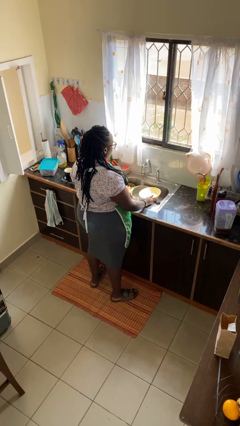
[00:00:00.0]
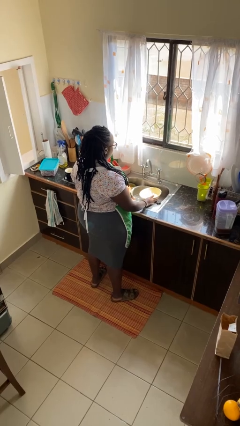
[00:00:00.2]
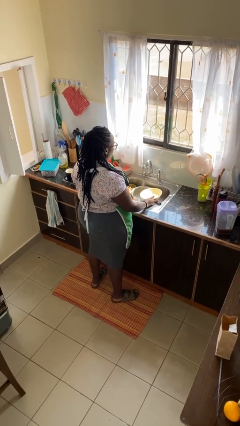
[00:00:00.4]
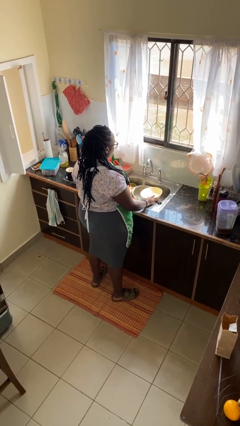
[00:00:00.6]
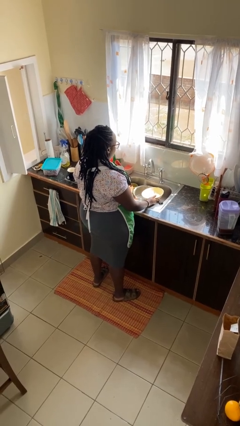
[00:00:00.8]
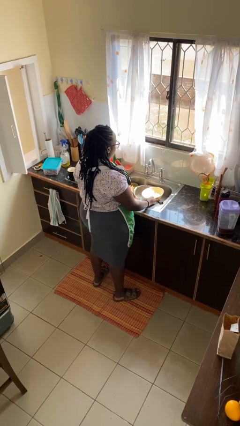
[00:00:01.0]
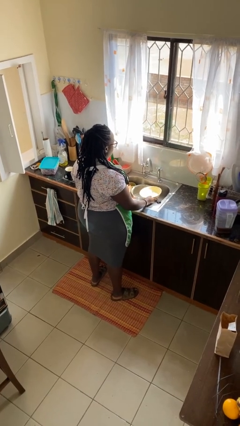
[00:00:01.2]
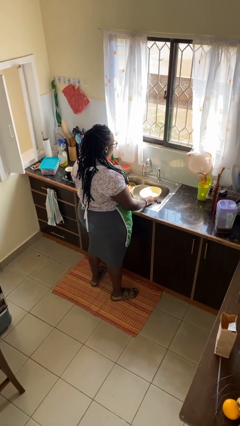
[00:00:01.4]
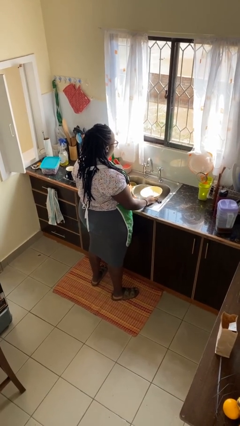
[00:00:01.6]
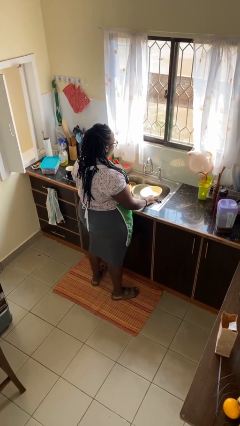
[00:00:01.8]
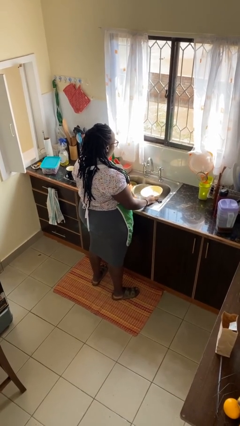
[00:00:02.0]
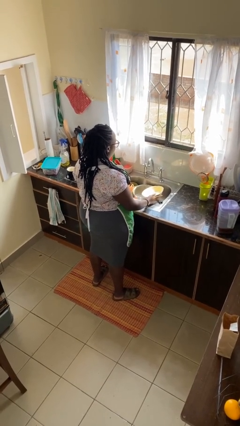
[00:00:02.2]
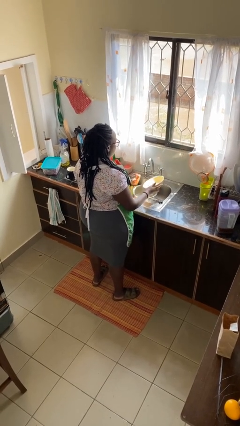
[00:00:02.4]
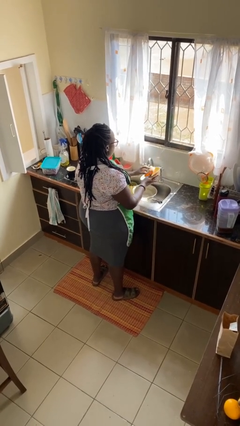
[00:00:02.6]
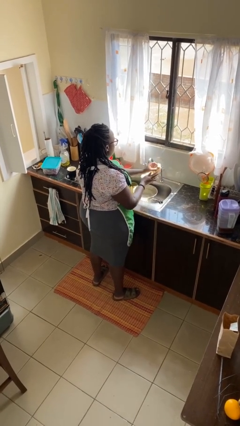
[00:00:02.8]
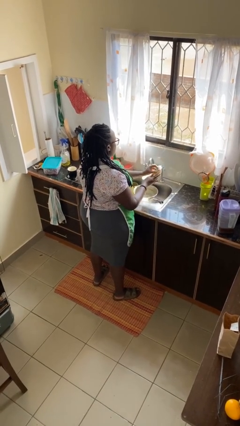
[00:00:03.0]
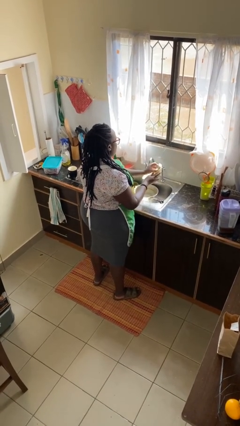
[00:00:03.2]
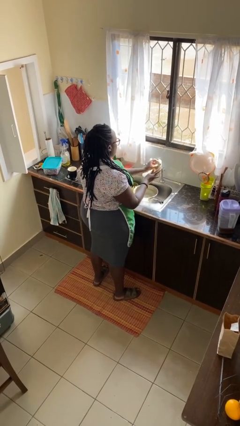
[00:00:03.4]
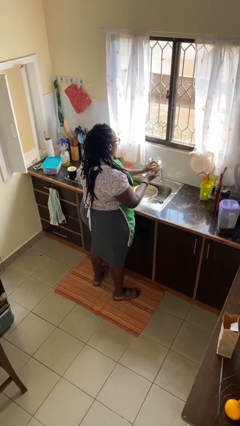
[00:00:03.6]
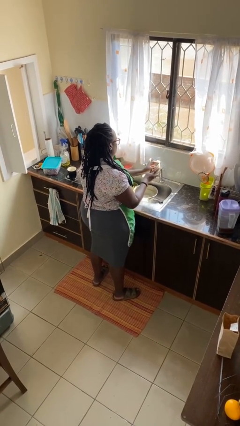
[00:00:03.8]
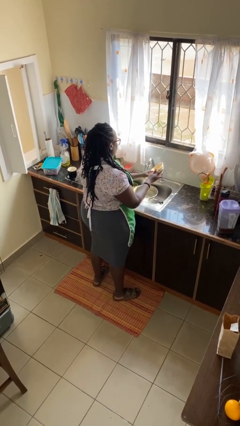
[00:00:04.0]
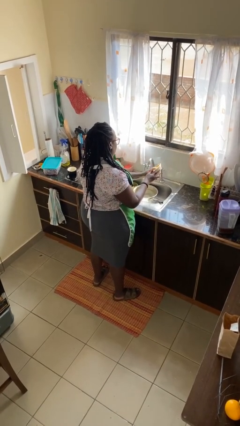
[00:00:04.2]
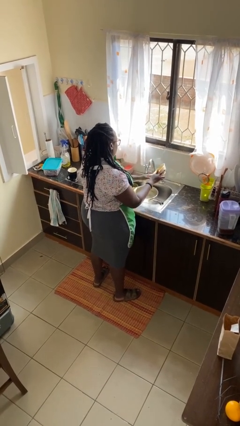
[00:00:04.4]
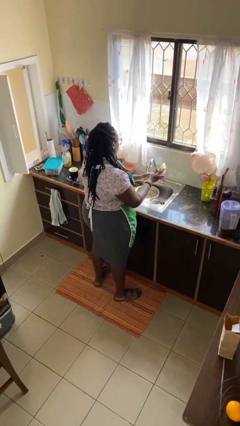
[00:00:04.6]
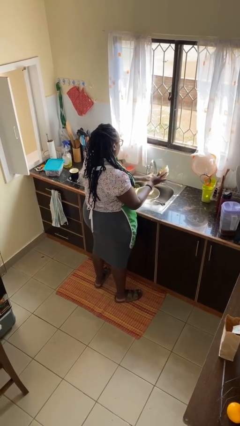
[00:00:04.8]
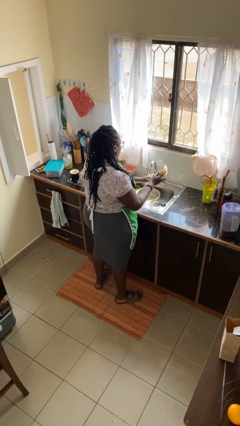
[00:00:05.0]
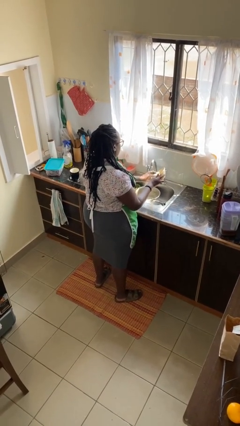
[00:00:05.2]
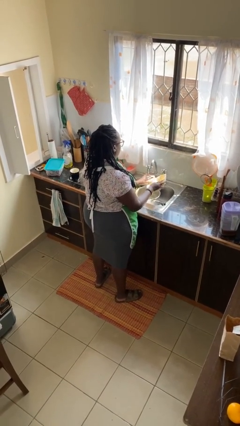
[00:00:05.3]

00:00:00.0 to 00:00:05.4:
person washes dish

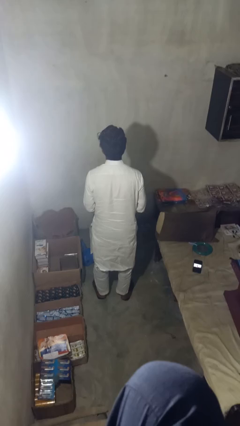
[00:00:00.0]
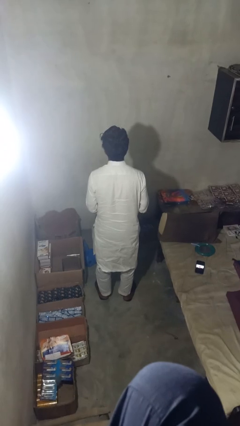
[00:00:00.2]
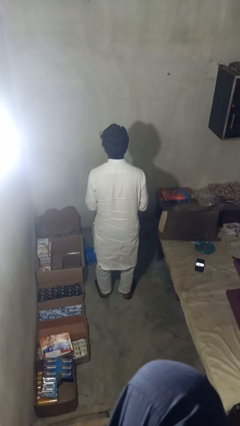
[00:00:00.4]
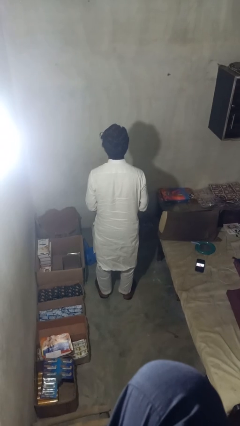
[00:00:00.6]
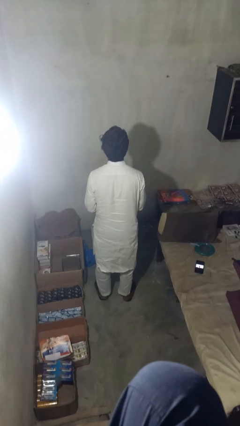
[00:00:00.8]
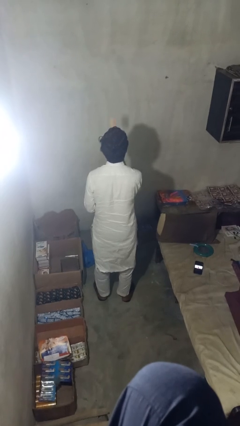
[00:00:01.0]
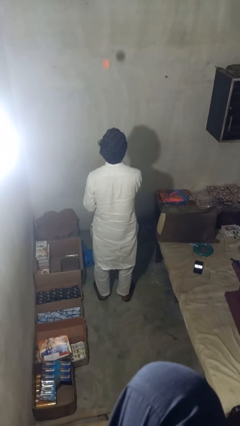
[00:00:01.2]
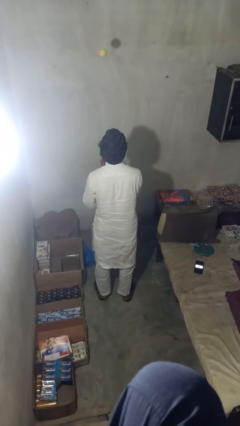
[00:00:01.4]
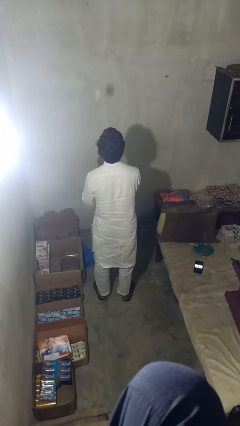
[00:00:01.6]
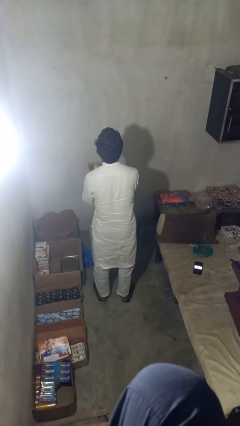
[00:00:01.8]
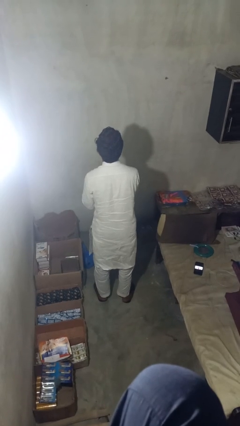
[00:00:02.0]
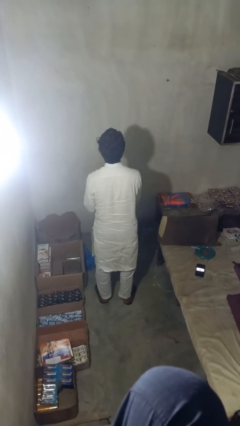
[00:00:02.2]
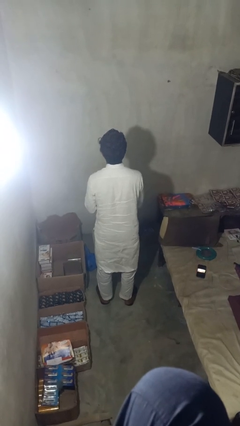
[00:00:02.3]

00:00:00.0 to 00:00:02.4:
person drops object

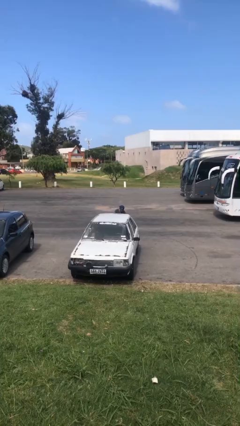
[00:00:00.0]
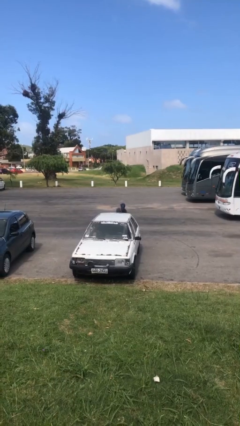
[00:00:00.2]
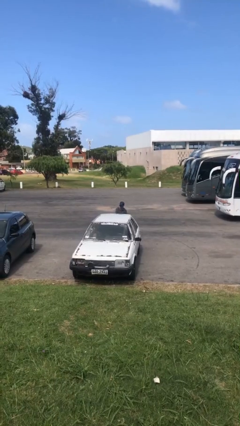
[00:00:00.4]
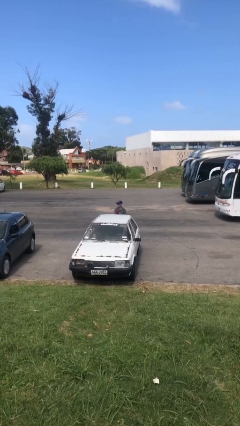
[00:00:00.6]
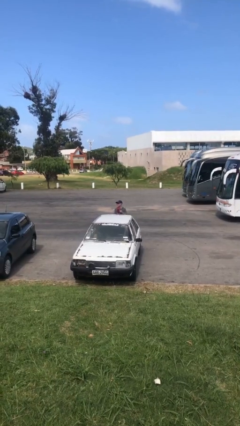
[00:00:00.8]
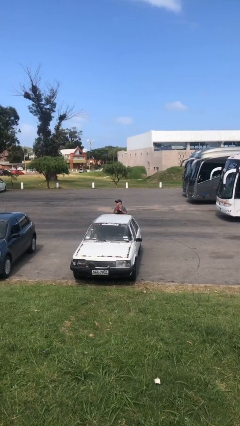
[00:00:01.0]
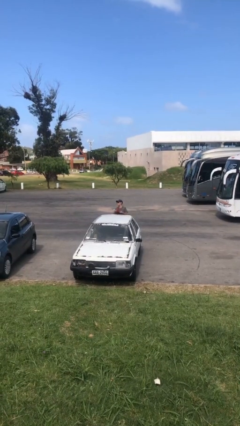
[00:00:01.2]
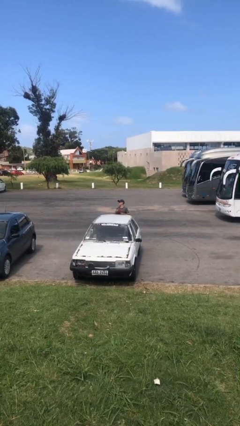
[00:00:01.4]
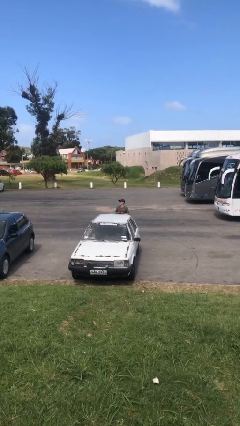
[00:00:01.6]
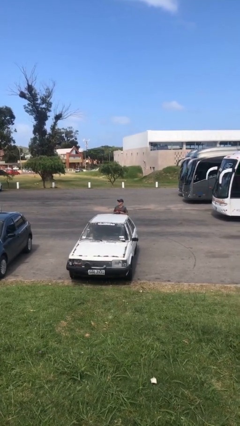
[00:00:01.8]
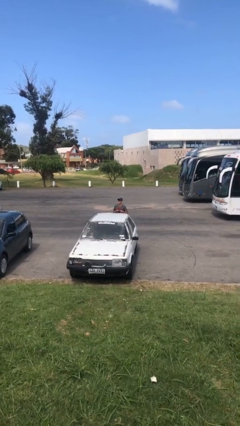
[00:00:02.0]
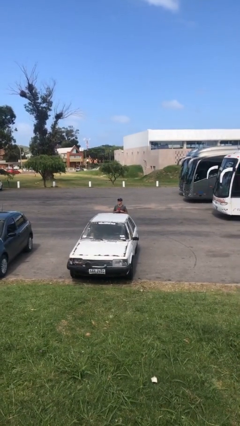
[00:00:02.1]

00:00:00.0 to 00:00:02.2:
person unloads car

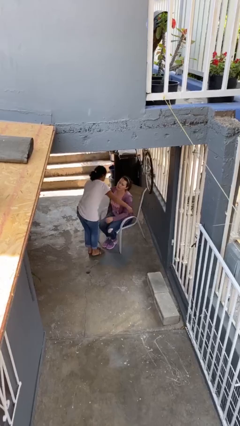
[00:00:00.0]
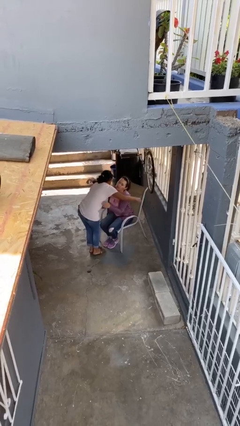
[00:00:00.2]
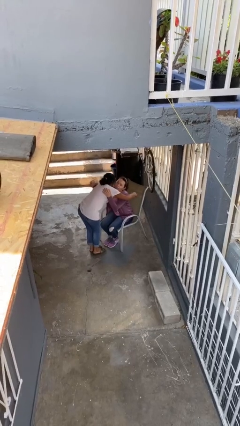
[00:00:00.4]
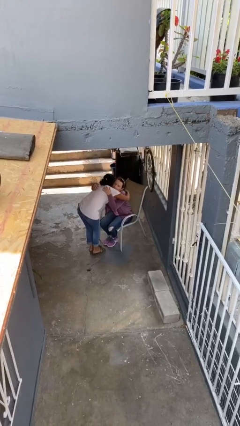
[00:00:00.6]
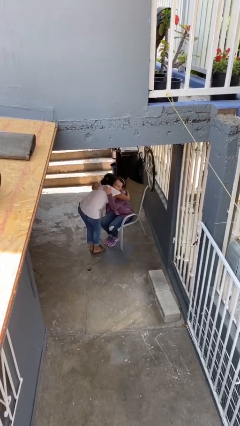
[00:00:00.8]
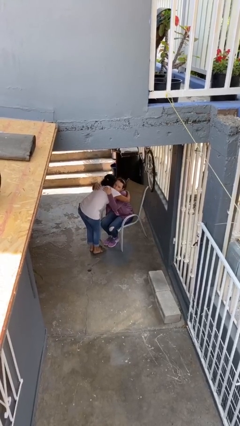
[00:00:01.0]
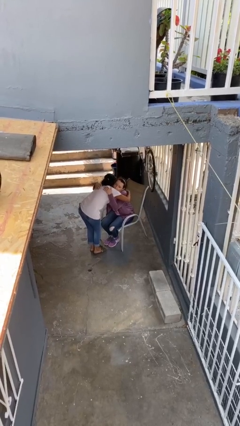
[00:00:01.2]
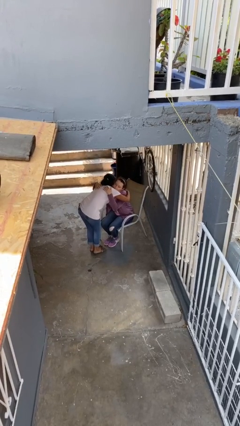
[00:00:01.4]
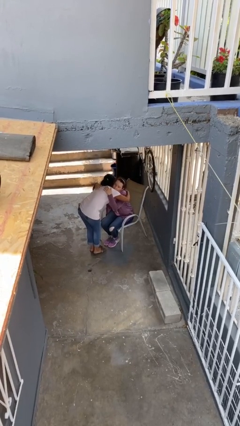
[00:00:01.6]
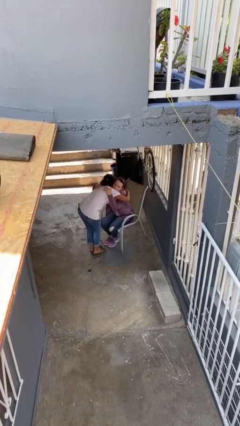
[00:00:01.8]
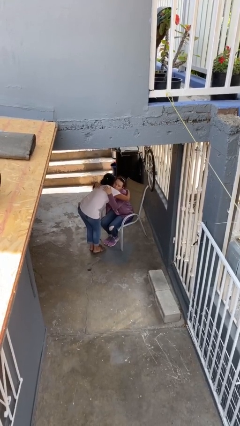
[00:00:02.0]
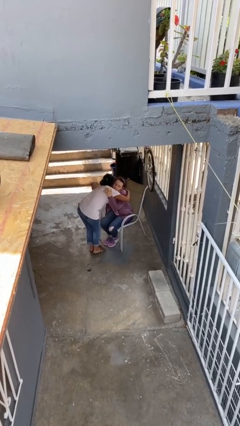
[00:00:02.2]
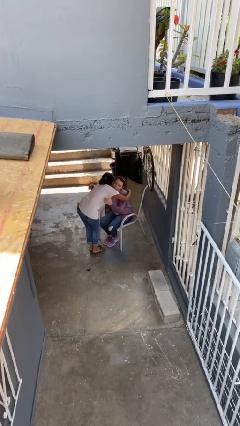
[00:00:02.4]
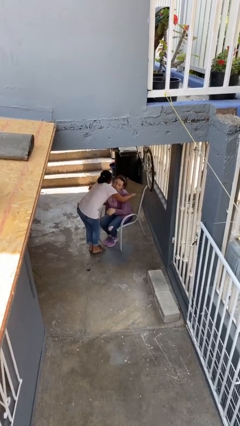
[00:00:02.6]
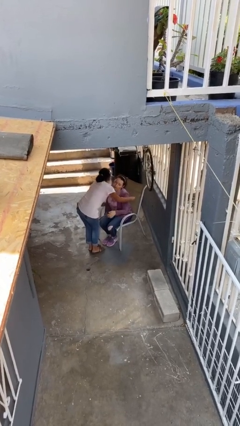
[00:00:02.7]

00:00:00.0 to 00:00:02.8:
person embraces person

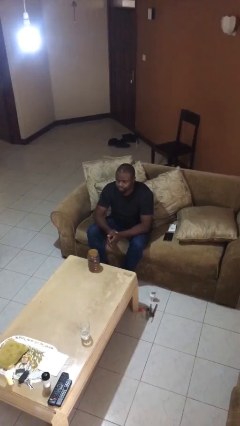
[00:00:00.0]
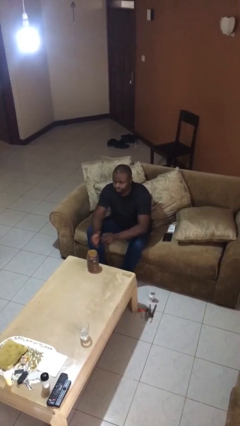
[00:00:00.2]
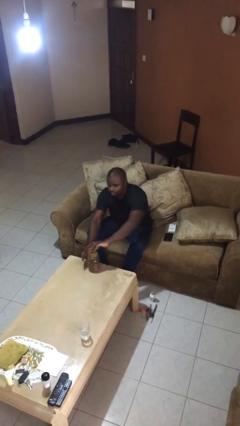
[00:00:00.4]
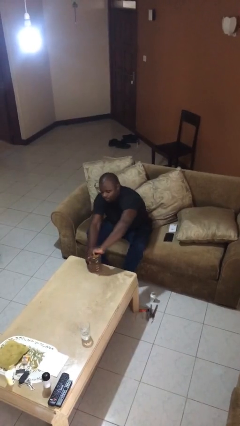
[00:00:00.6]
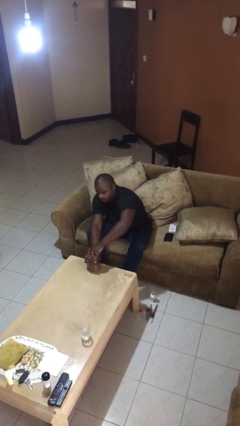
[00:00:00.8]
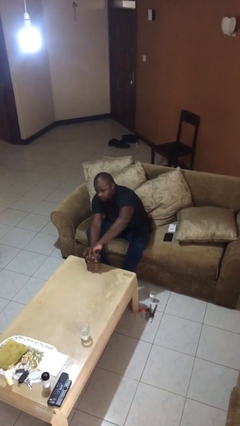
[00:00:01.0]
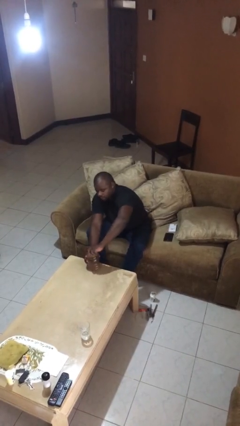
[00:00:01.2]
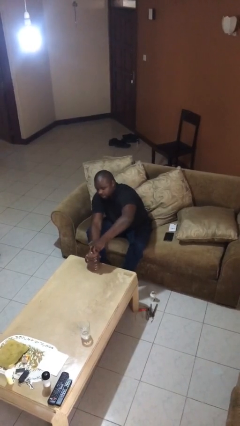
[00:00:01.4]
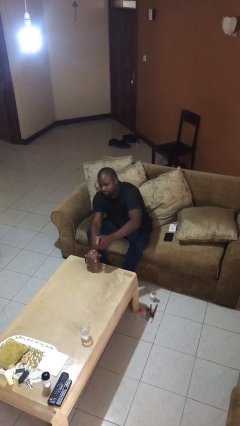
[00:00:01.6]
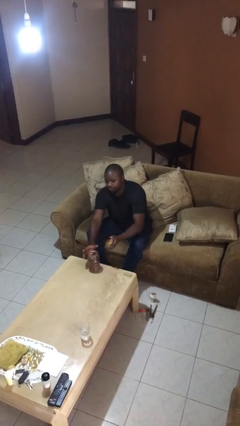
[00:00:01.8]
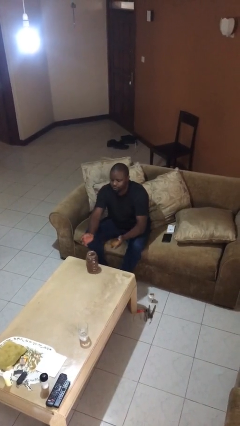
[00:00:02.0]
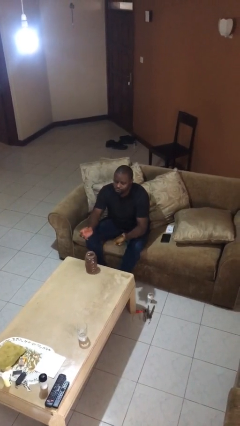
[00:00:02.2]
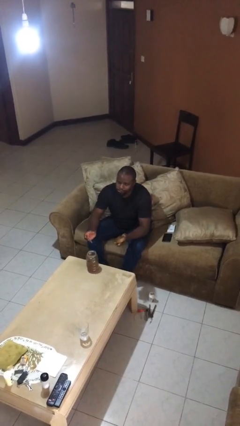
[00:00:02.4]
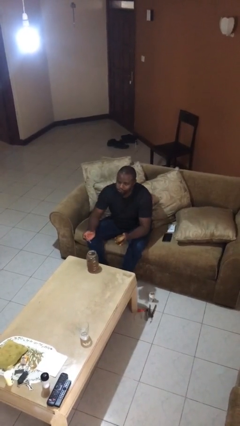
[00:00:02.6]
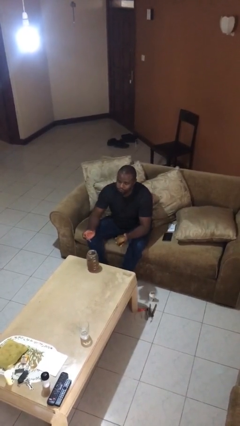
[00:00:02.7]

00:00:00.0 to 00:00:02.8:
person opens jar

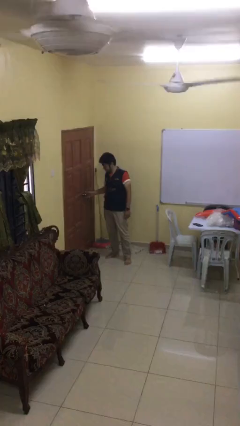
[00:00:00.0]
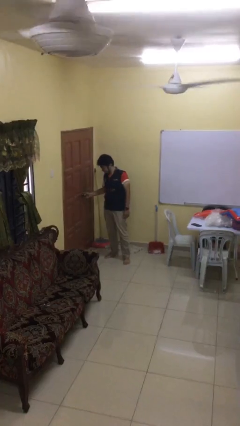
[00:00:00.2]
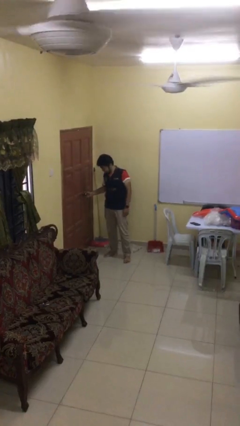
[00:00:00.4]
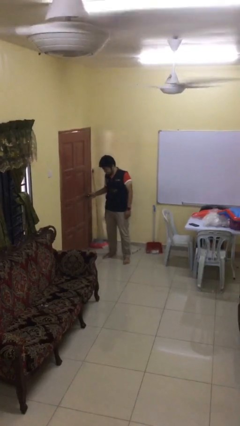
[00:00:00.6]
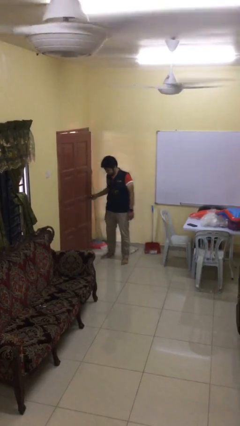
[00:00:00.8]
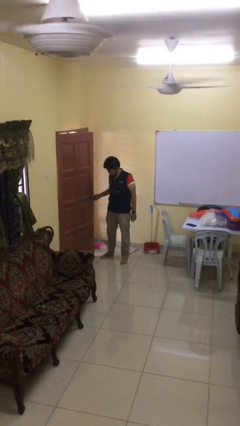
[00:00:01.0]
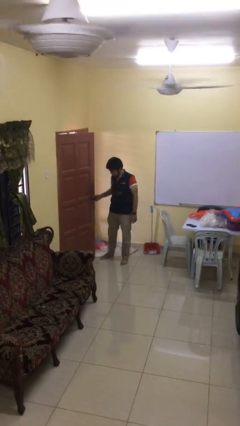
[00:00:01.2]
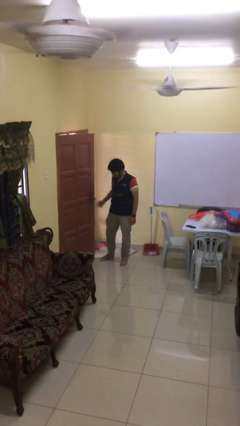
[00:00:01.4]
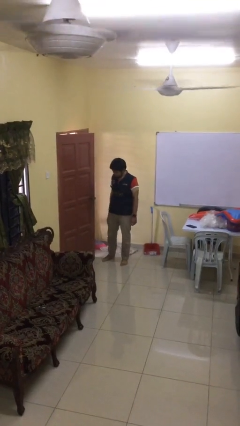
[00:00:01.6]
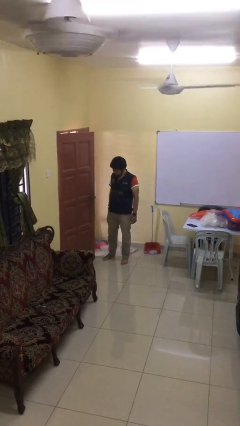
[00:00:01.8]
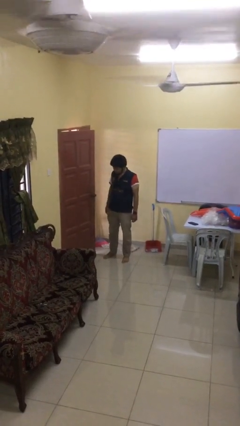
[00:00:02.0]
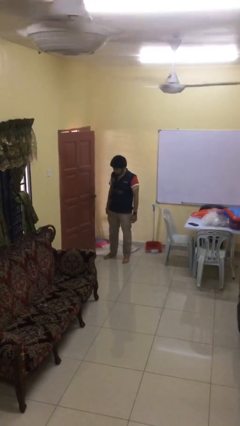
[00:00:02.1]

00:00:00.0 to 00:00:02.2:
person opens facility door
